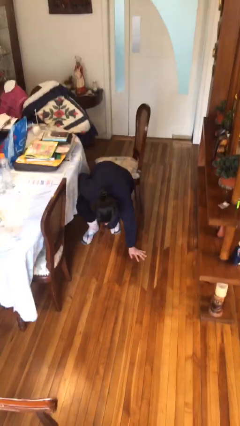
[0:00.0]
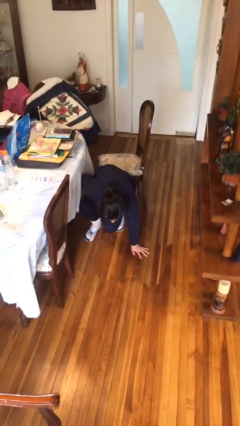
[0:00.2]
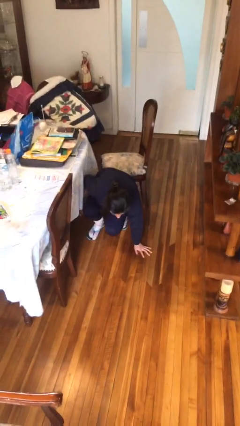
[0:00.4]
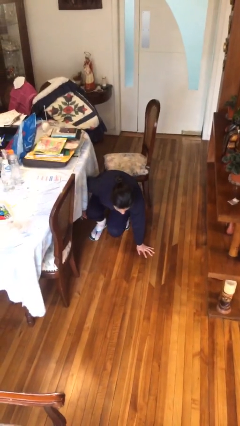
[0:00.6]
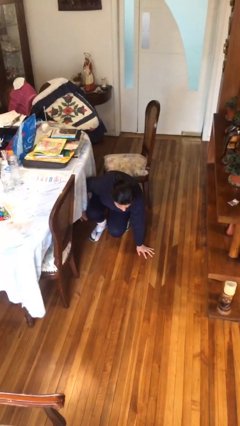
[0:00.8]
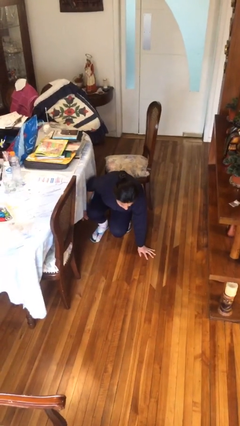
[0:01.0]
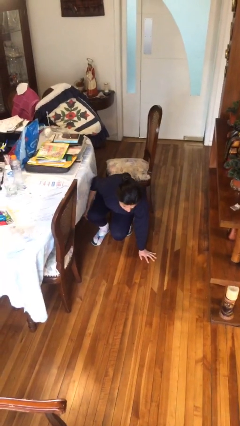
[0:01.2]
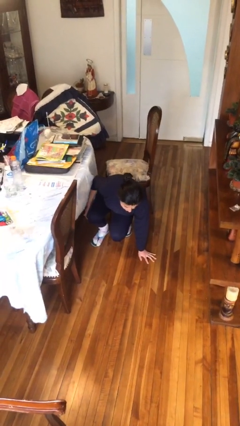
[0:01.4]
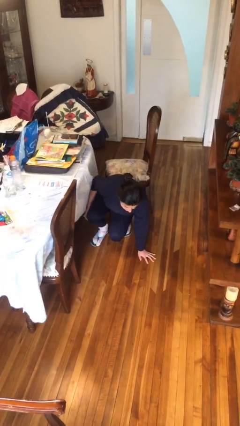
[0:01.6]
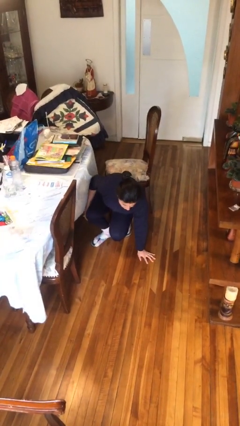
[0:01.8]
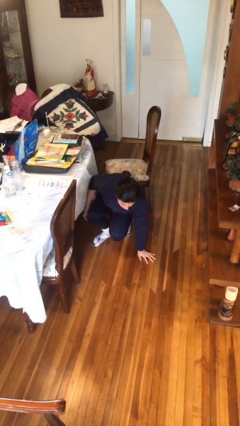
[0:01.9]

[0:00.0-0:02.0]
person falls from chair

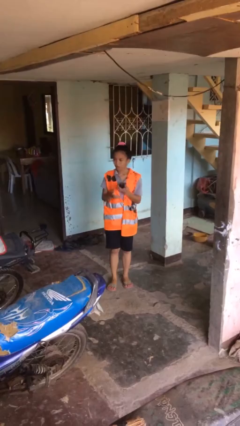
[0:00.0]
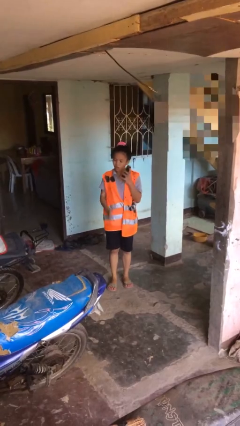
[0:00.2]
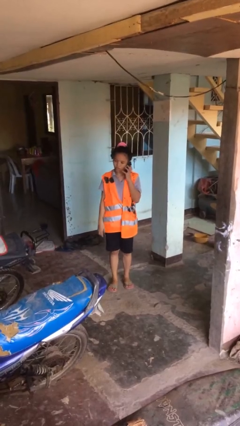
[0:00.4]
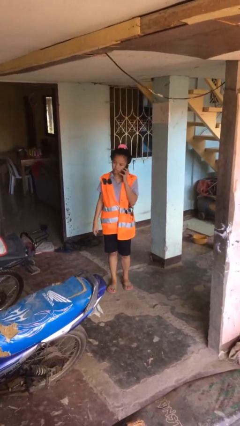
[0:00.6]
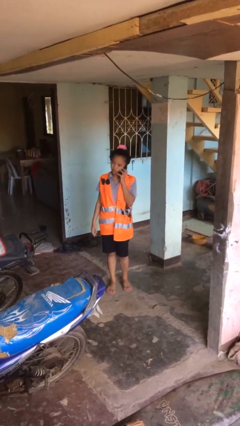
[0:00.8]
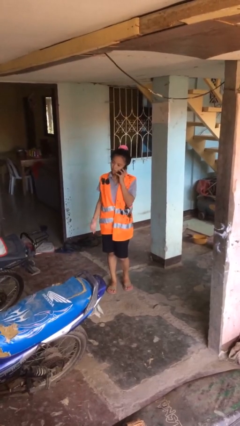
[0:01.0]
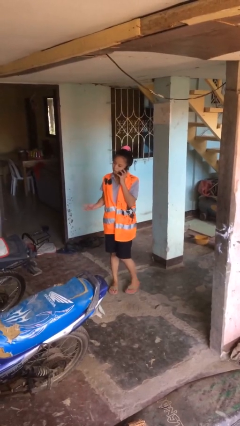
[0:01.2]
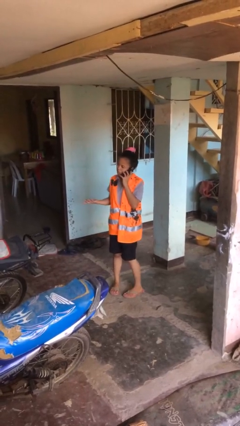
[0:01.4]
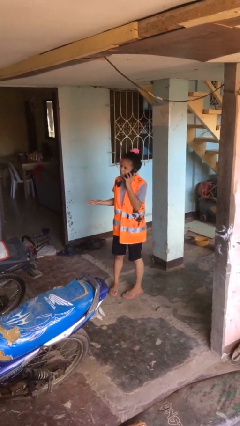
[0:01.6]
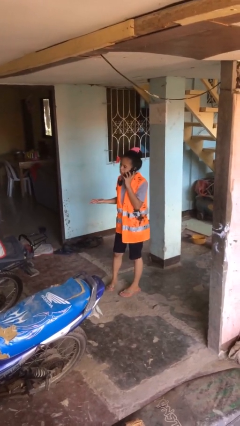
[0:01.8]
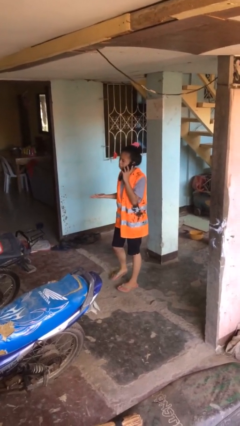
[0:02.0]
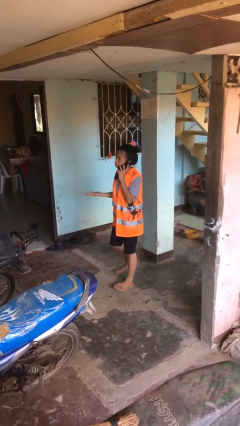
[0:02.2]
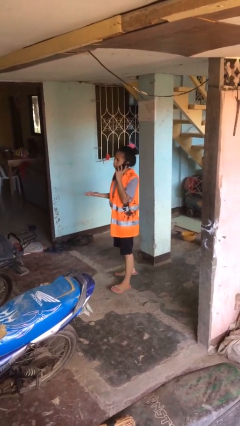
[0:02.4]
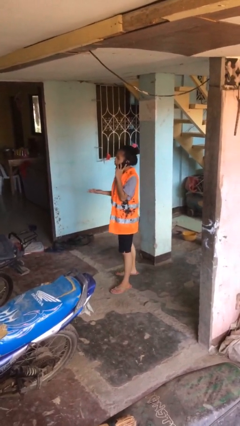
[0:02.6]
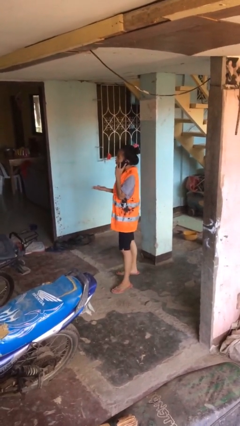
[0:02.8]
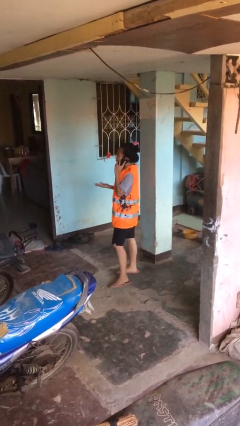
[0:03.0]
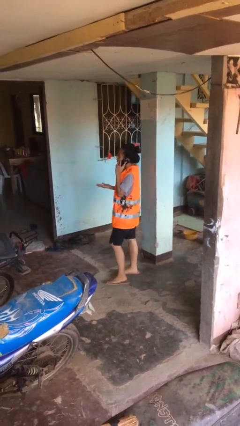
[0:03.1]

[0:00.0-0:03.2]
person talks on phone

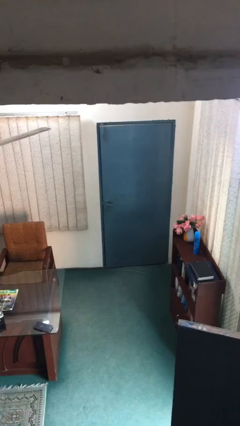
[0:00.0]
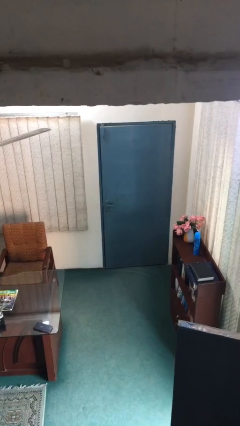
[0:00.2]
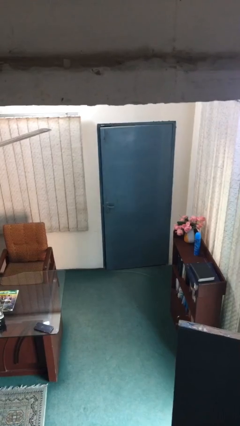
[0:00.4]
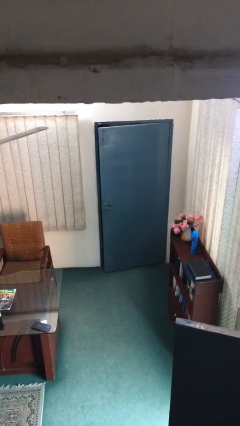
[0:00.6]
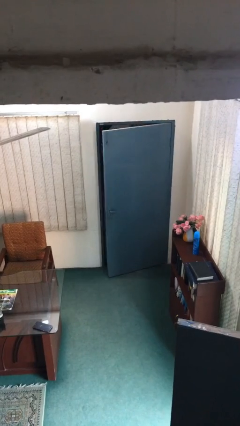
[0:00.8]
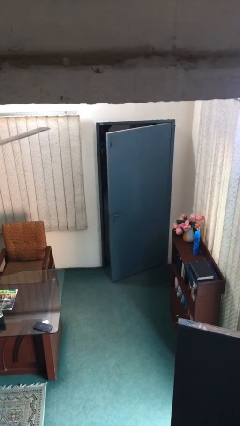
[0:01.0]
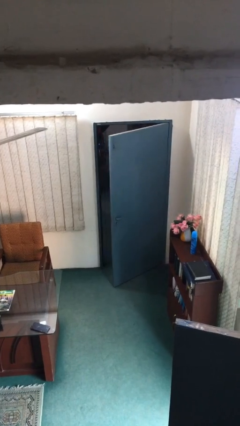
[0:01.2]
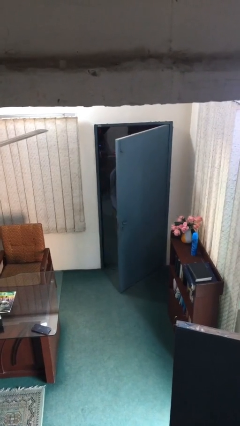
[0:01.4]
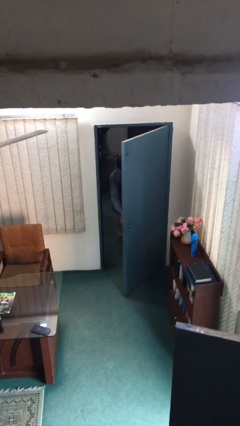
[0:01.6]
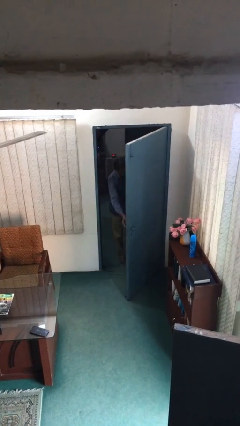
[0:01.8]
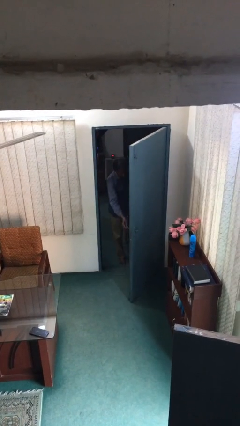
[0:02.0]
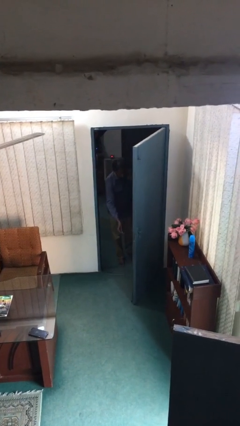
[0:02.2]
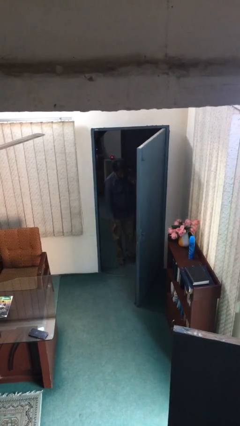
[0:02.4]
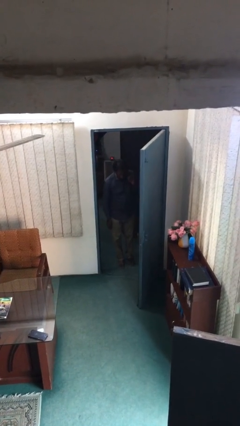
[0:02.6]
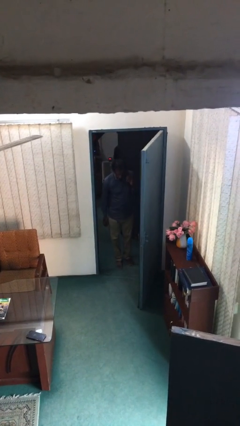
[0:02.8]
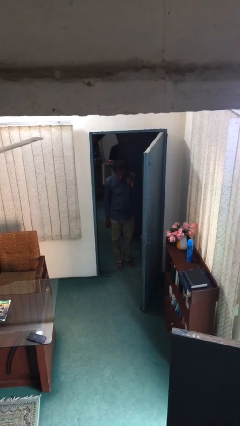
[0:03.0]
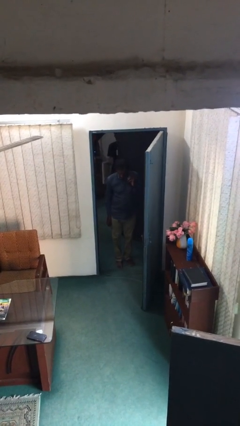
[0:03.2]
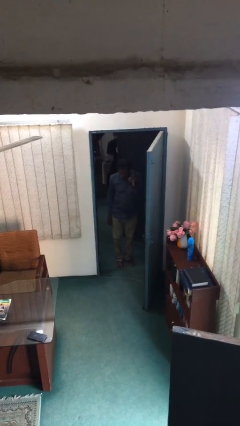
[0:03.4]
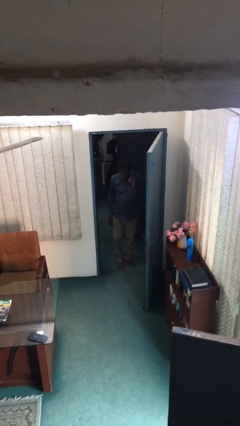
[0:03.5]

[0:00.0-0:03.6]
person opens facility door

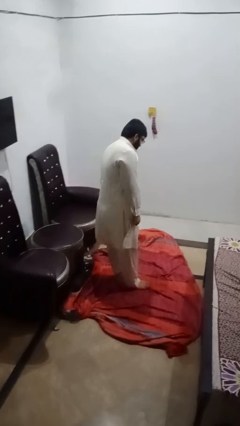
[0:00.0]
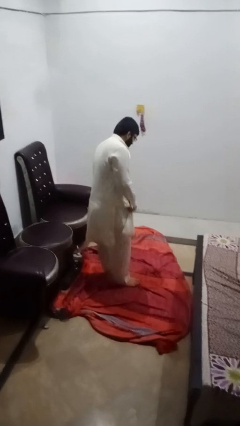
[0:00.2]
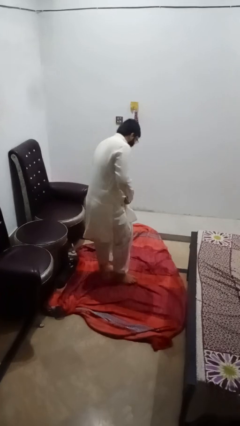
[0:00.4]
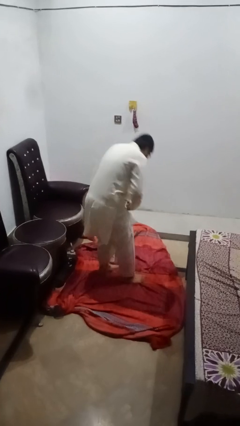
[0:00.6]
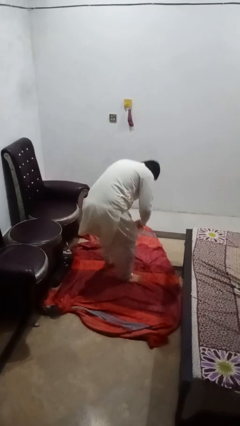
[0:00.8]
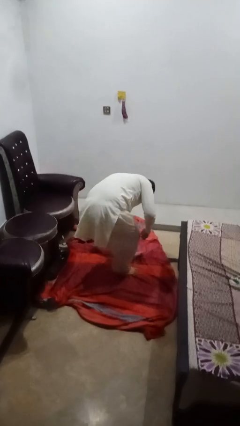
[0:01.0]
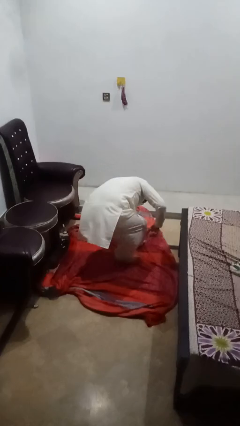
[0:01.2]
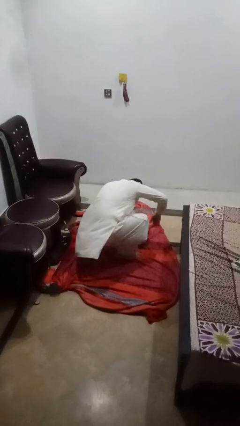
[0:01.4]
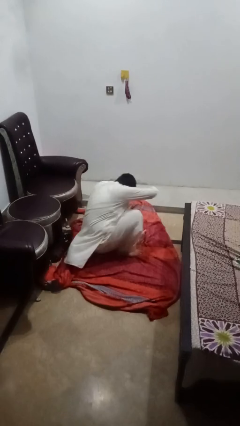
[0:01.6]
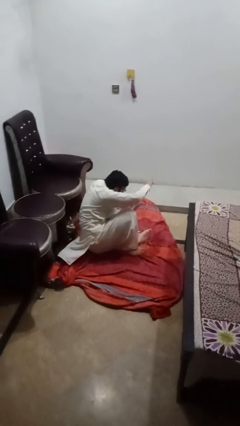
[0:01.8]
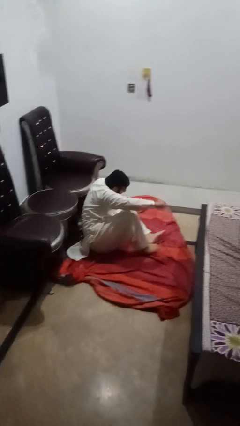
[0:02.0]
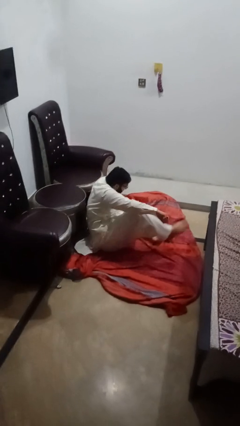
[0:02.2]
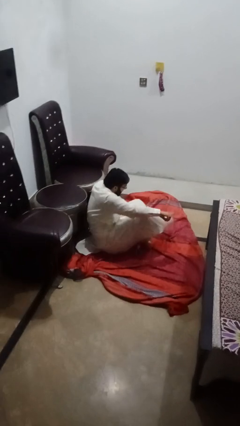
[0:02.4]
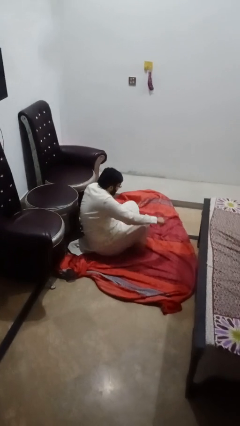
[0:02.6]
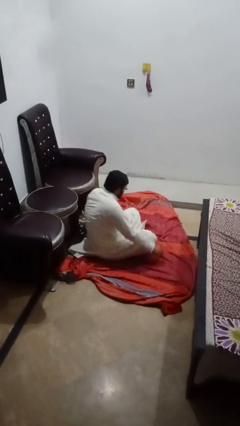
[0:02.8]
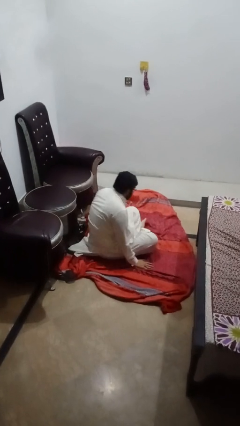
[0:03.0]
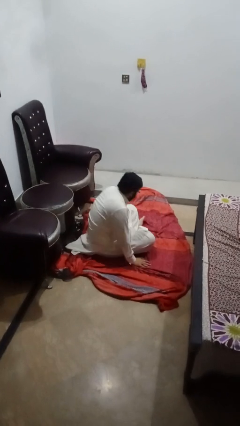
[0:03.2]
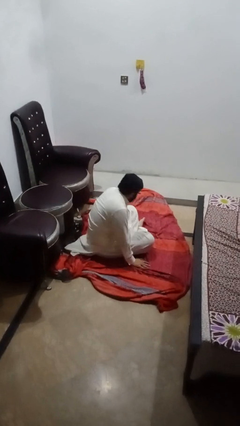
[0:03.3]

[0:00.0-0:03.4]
person sits crisscross

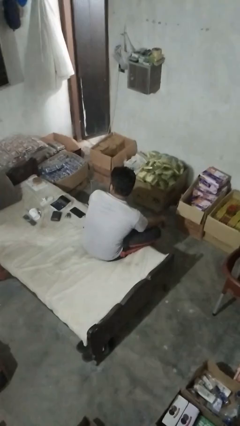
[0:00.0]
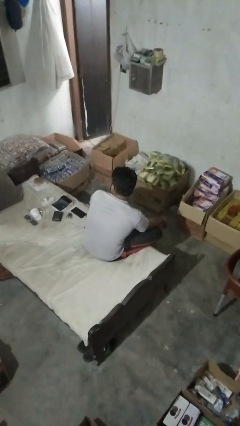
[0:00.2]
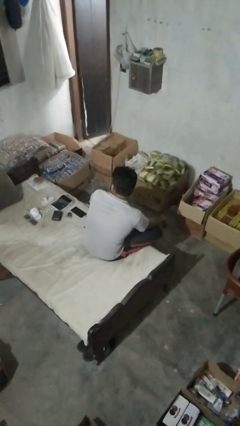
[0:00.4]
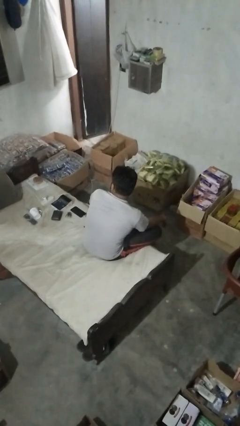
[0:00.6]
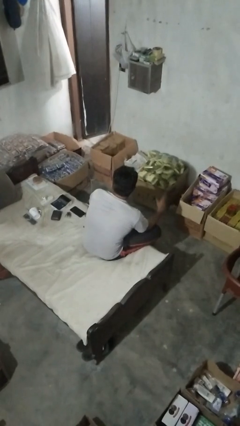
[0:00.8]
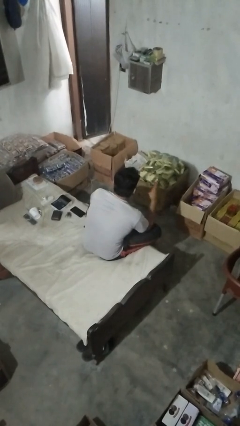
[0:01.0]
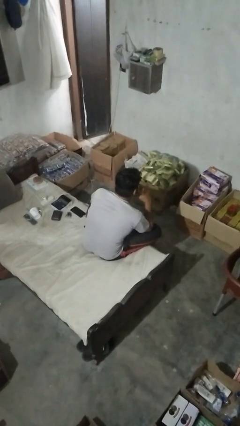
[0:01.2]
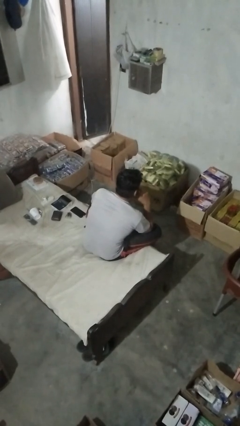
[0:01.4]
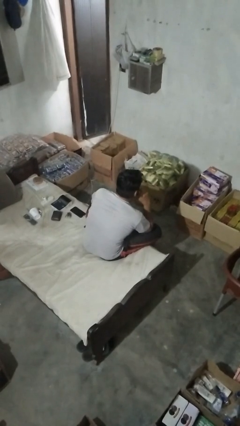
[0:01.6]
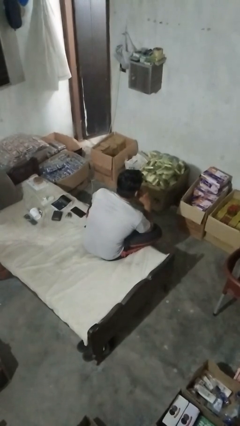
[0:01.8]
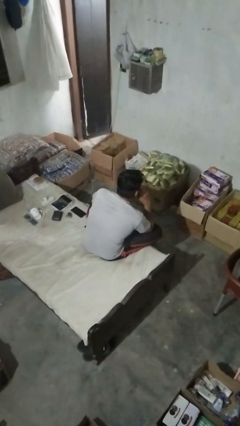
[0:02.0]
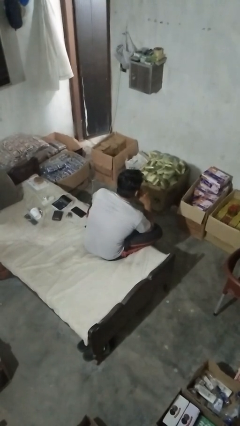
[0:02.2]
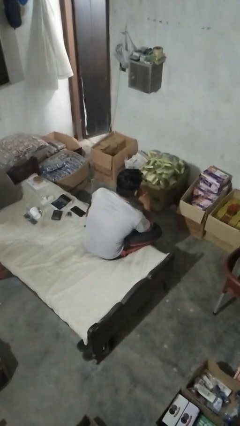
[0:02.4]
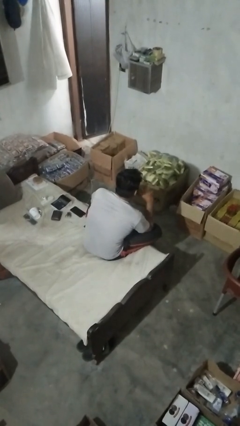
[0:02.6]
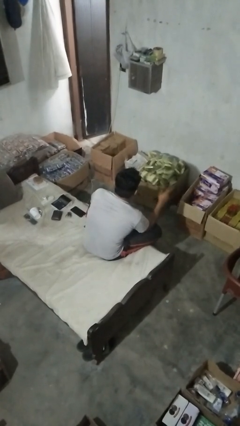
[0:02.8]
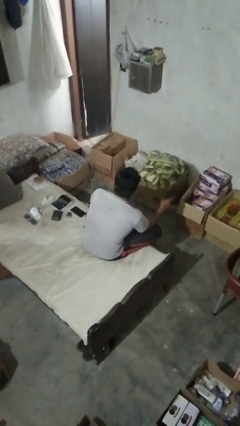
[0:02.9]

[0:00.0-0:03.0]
person strokes chin

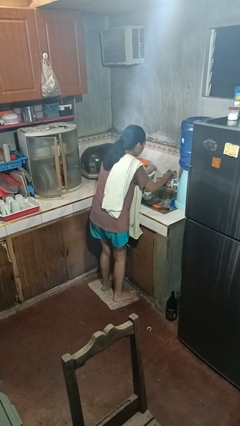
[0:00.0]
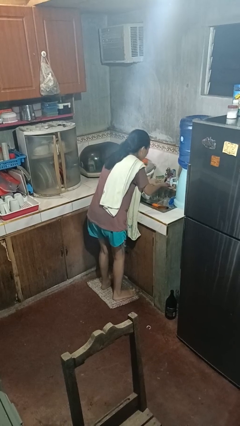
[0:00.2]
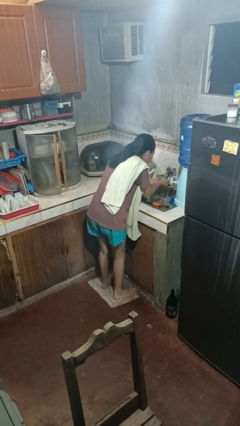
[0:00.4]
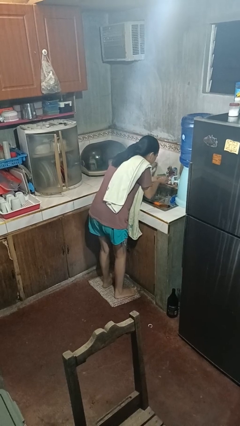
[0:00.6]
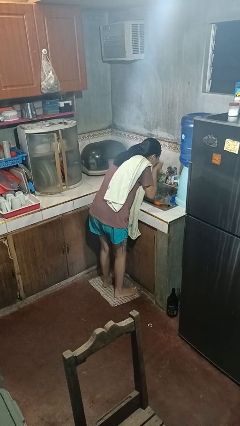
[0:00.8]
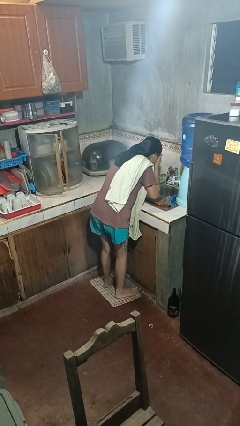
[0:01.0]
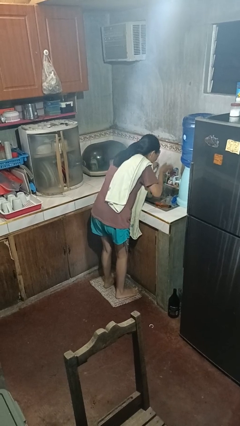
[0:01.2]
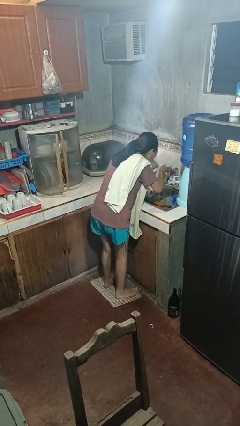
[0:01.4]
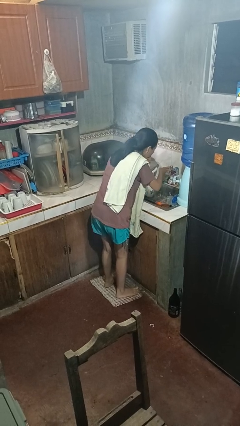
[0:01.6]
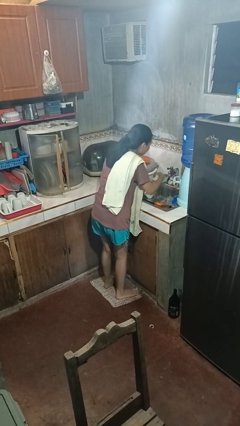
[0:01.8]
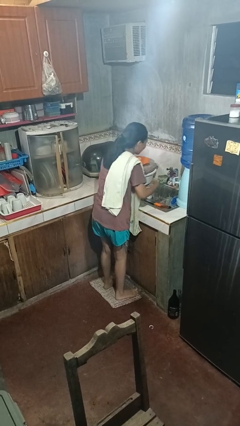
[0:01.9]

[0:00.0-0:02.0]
person washes face

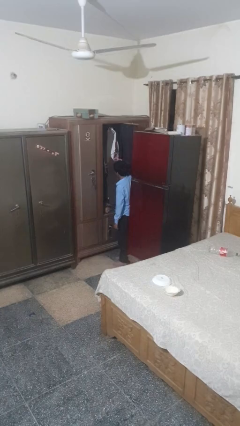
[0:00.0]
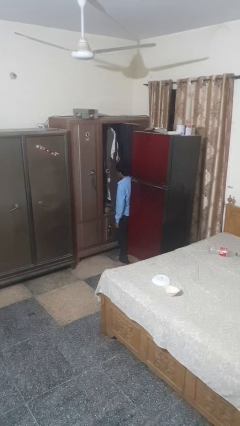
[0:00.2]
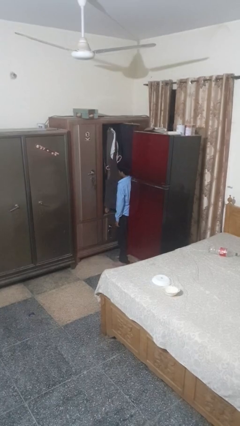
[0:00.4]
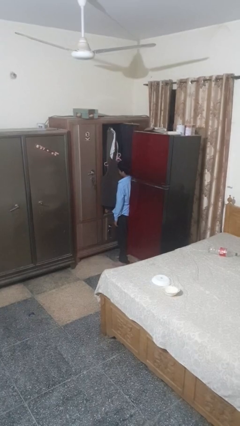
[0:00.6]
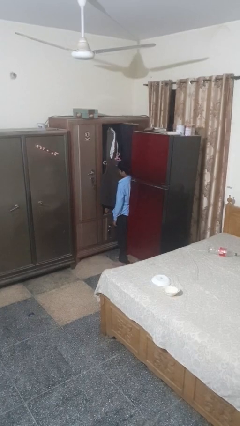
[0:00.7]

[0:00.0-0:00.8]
person takes clothes from closet
